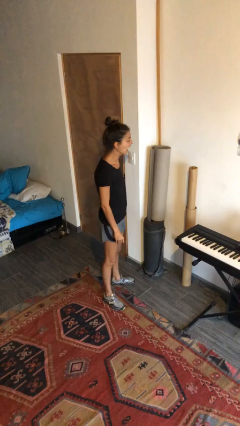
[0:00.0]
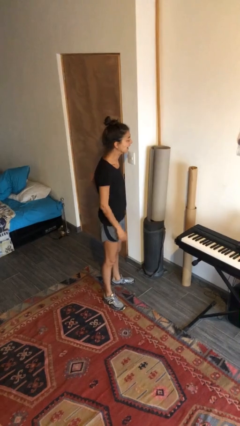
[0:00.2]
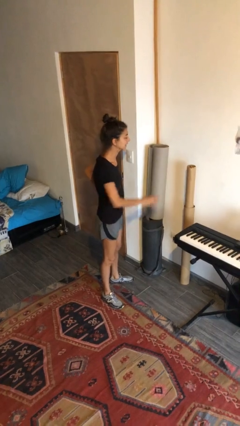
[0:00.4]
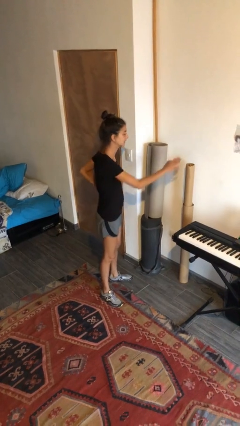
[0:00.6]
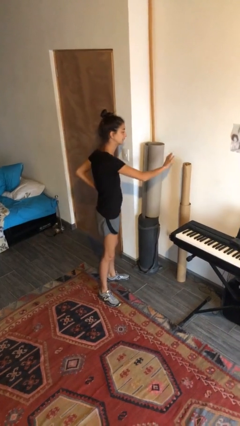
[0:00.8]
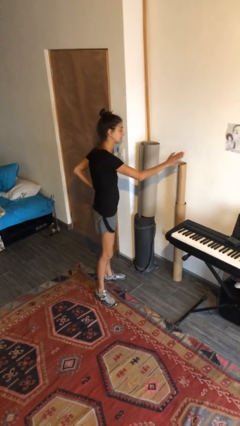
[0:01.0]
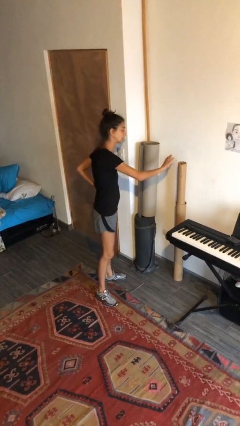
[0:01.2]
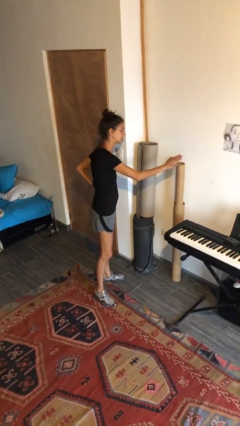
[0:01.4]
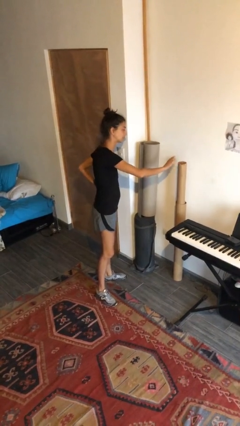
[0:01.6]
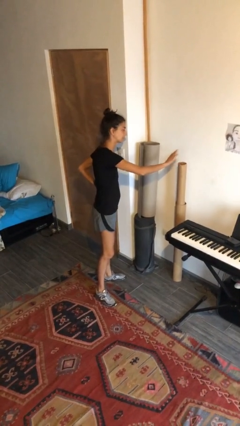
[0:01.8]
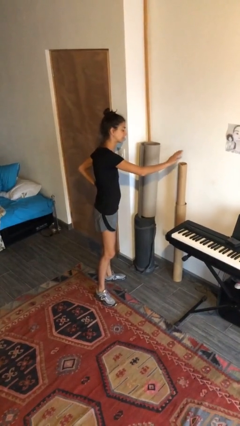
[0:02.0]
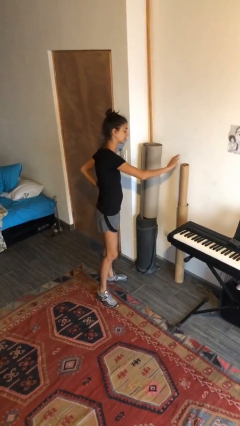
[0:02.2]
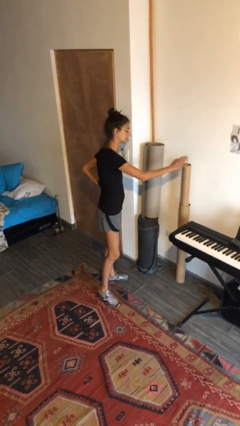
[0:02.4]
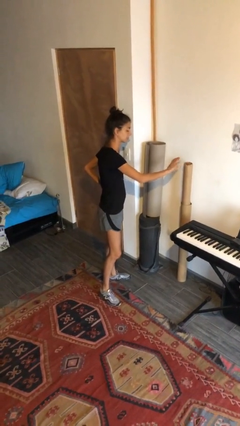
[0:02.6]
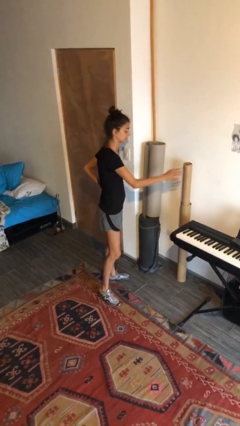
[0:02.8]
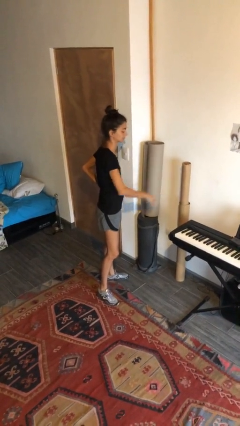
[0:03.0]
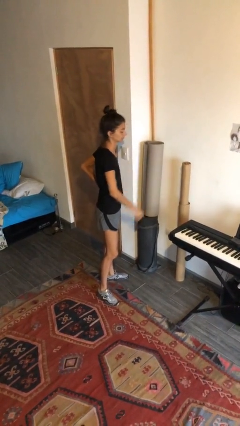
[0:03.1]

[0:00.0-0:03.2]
person waves hand over object

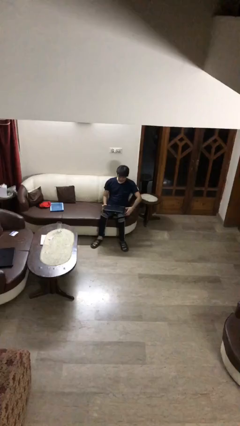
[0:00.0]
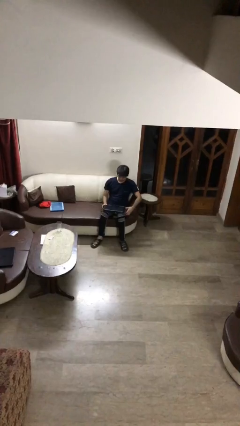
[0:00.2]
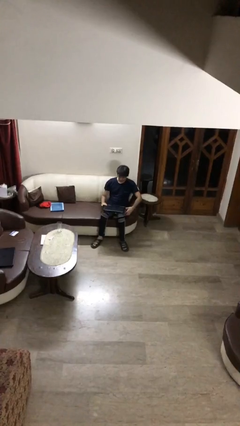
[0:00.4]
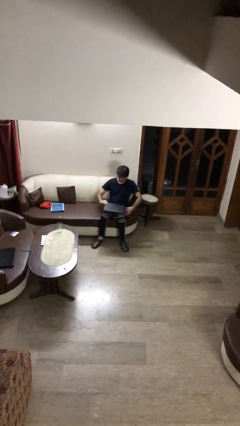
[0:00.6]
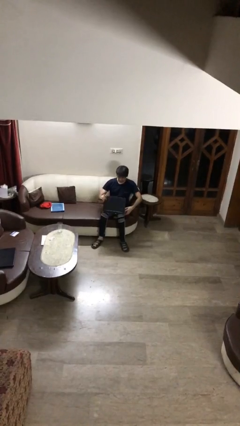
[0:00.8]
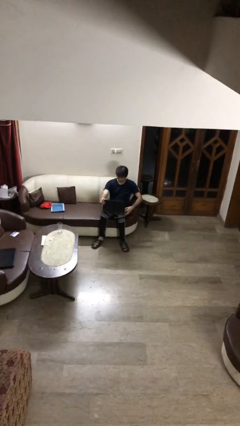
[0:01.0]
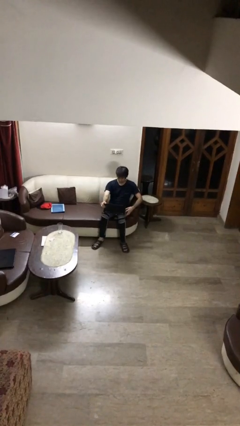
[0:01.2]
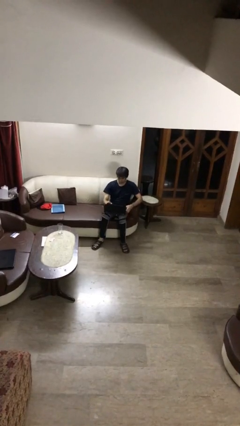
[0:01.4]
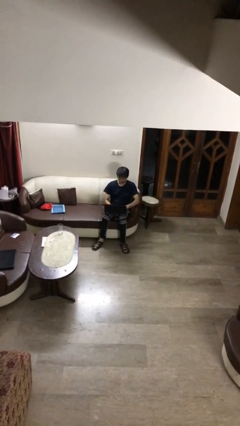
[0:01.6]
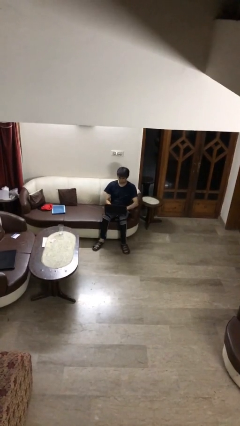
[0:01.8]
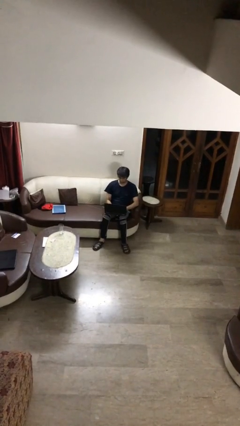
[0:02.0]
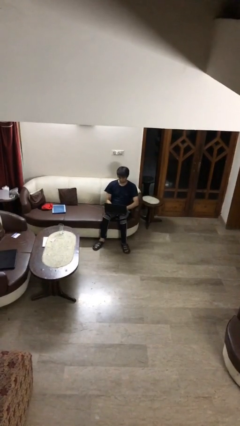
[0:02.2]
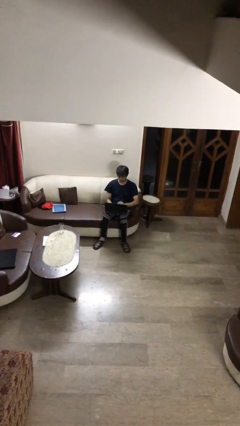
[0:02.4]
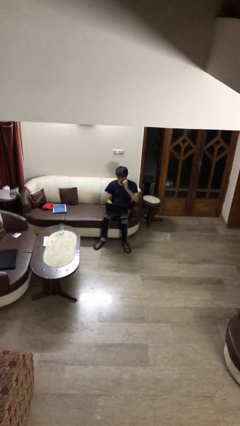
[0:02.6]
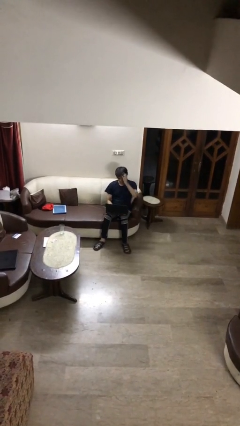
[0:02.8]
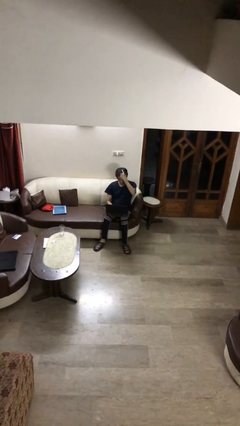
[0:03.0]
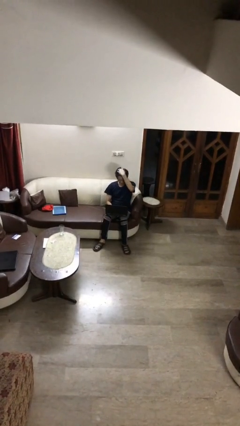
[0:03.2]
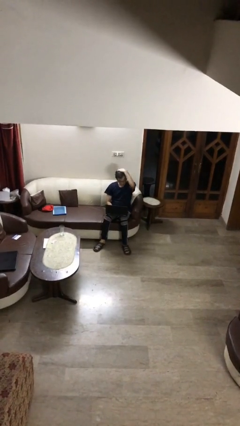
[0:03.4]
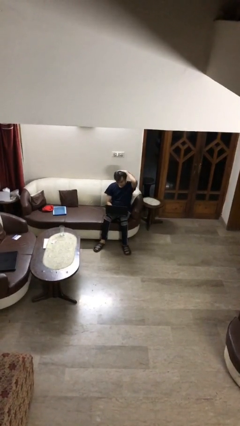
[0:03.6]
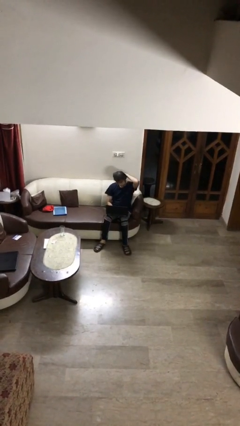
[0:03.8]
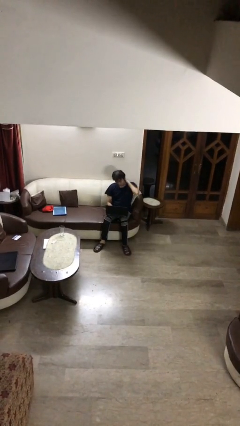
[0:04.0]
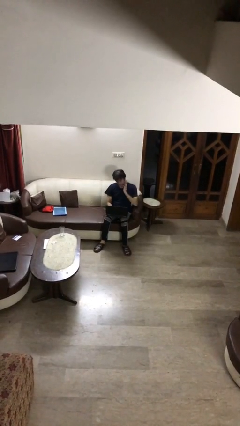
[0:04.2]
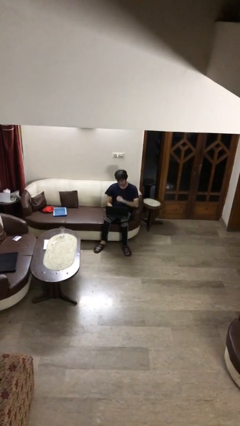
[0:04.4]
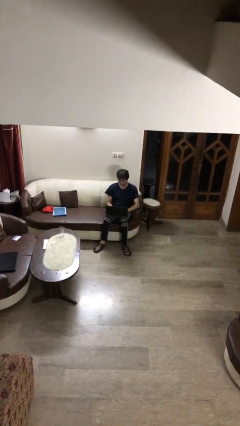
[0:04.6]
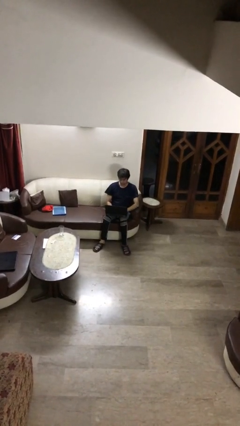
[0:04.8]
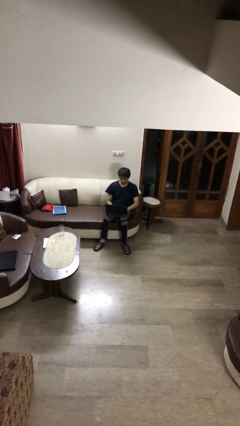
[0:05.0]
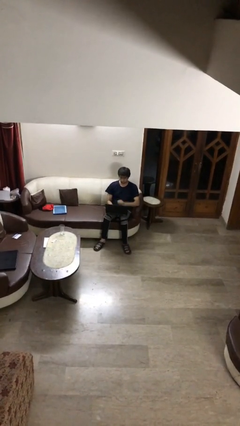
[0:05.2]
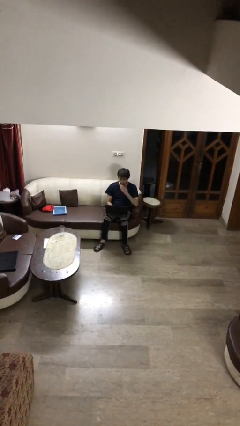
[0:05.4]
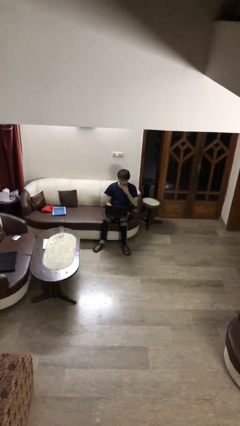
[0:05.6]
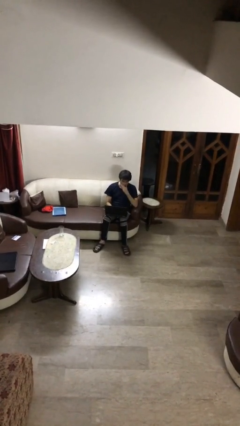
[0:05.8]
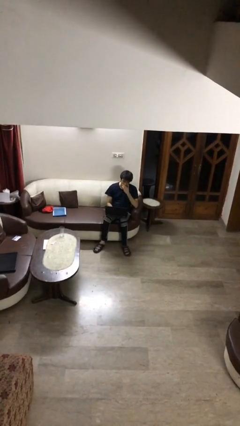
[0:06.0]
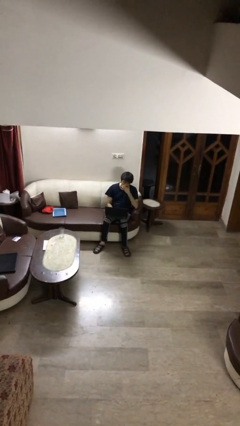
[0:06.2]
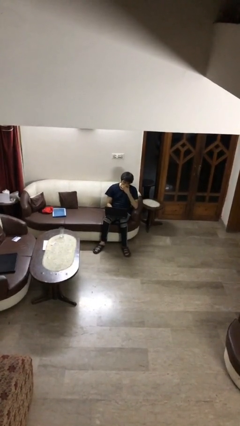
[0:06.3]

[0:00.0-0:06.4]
person interacts with laptop

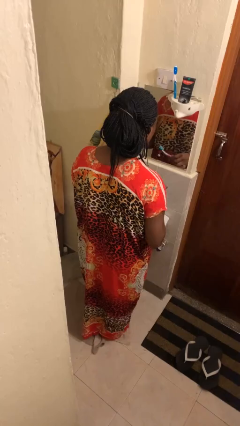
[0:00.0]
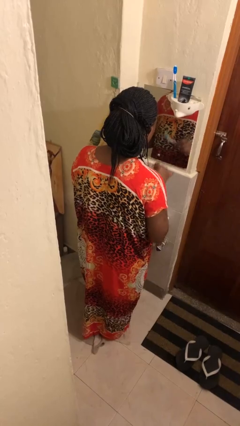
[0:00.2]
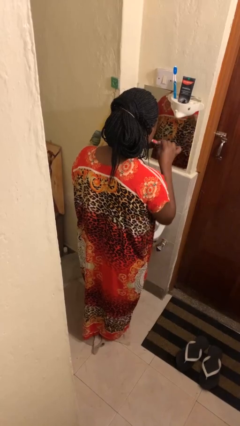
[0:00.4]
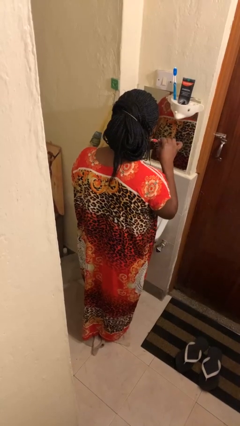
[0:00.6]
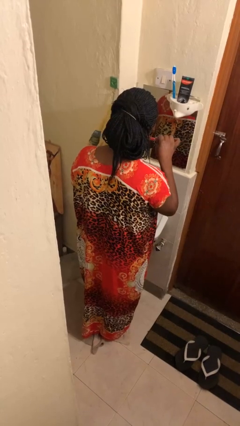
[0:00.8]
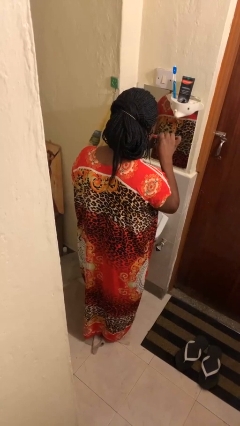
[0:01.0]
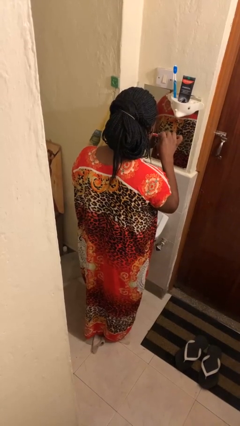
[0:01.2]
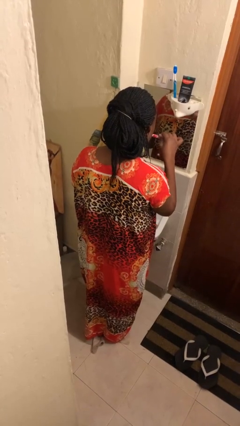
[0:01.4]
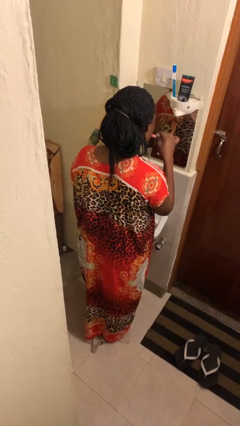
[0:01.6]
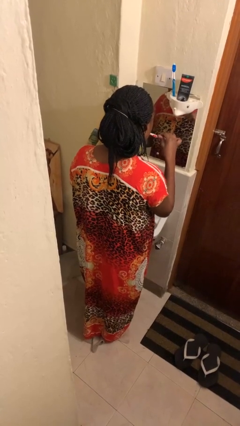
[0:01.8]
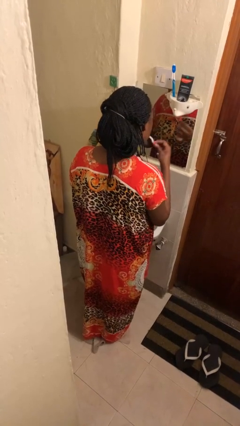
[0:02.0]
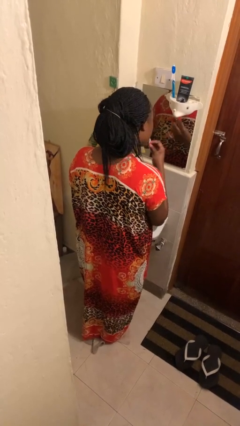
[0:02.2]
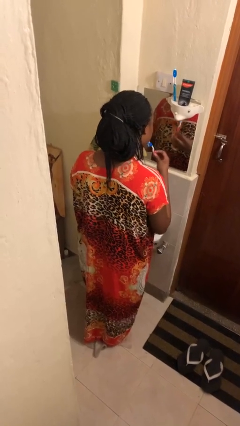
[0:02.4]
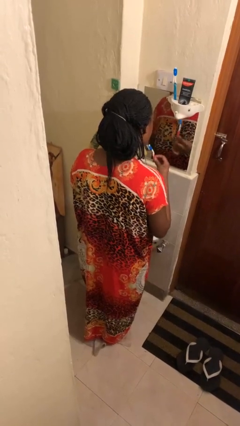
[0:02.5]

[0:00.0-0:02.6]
person brushes teeth

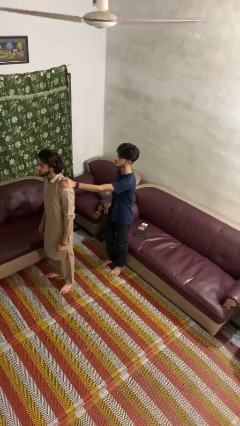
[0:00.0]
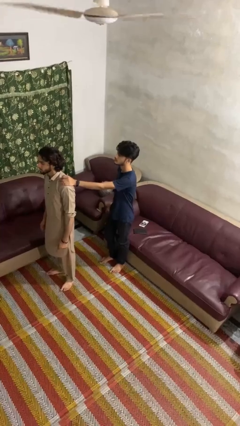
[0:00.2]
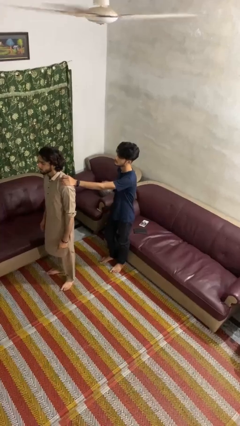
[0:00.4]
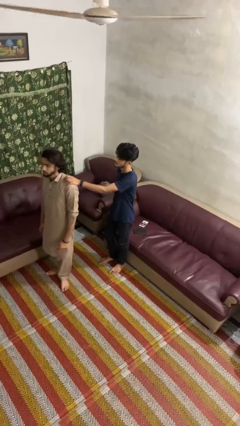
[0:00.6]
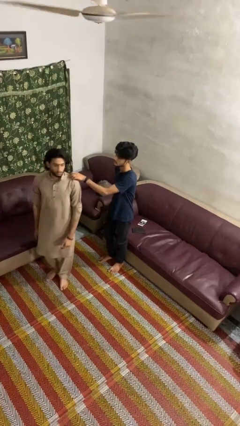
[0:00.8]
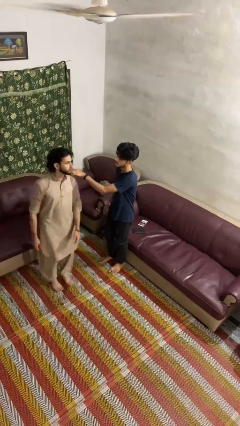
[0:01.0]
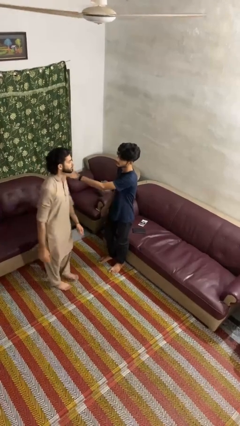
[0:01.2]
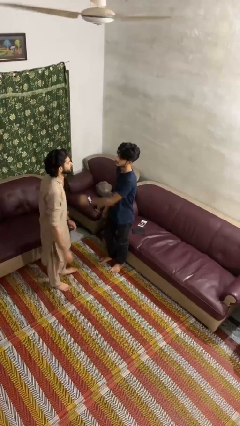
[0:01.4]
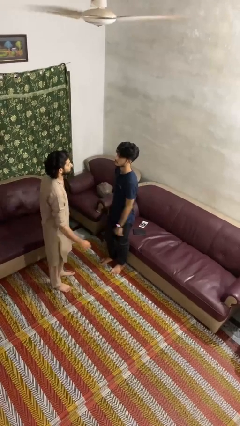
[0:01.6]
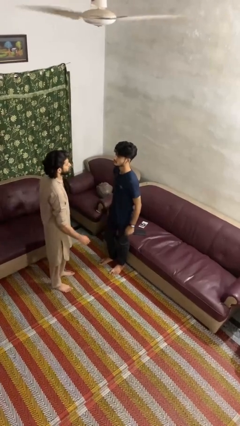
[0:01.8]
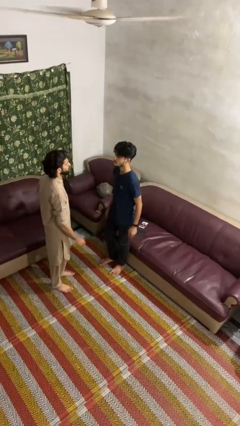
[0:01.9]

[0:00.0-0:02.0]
person spins person around

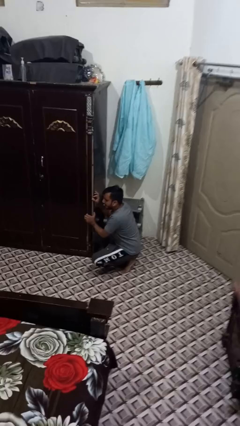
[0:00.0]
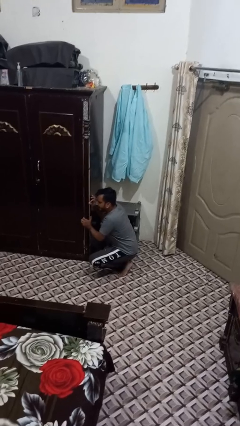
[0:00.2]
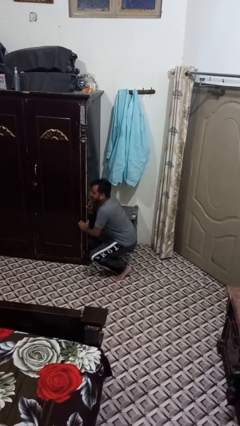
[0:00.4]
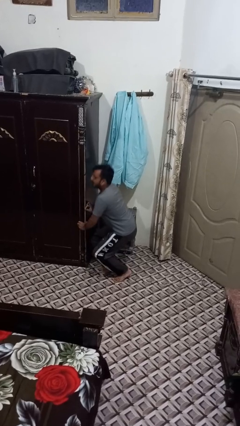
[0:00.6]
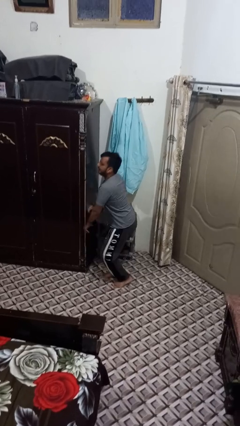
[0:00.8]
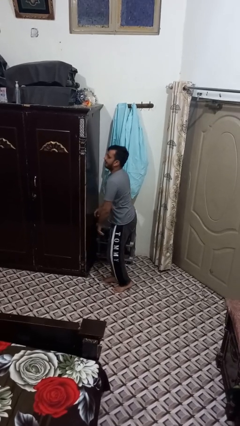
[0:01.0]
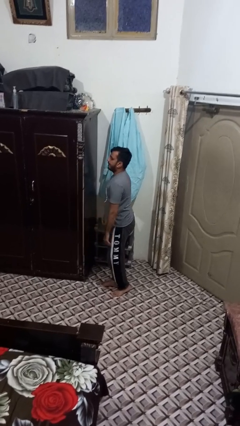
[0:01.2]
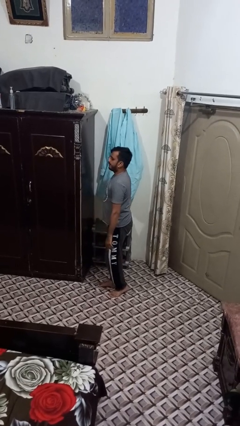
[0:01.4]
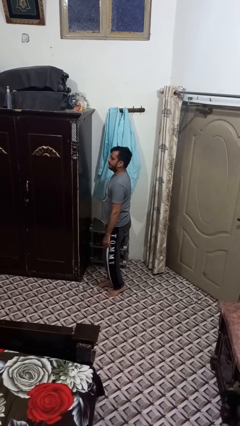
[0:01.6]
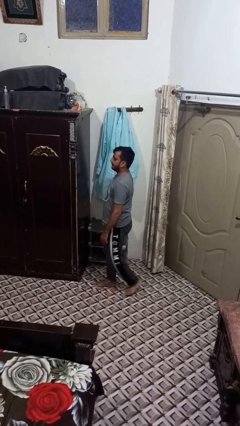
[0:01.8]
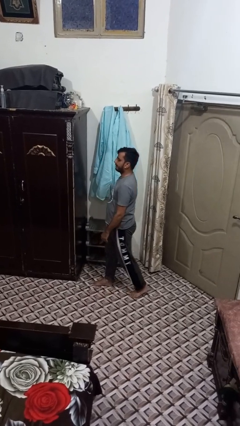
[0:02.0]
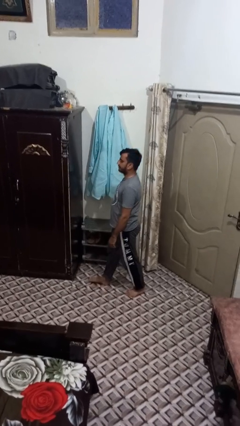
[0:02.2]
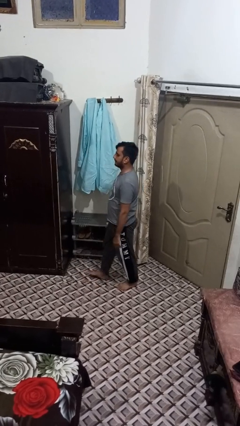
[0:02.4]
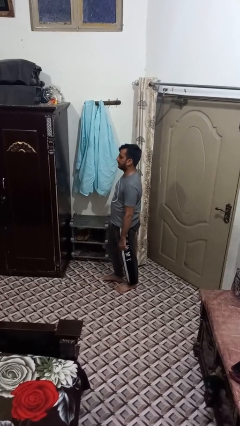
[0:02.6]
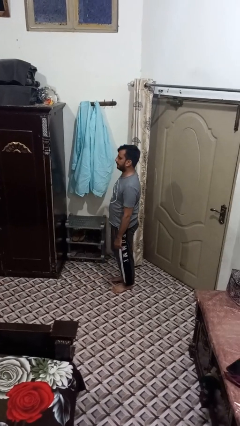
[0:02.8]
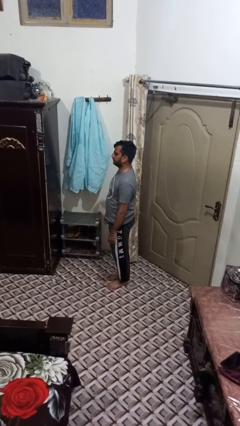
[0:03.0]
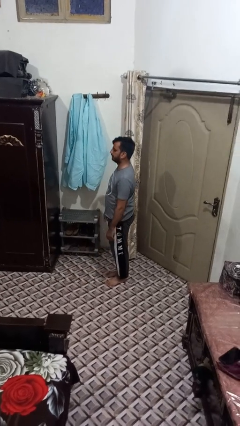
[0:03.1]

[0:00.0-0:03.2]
person stands up from floor
